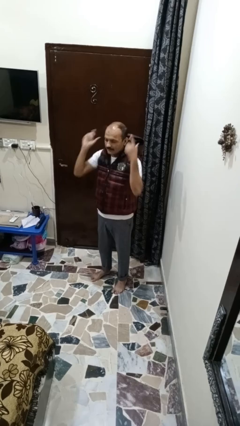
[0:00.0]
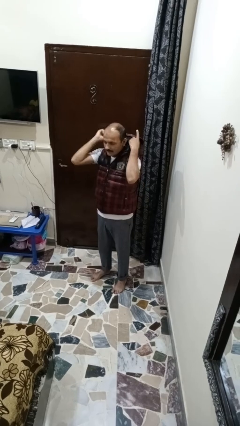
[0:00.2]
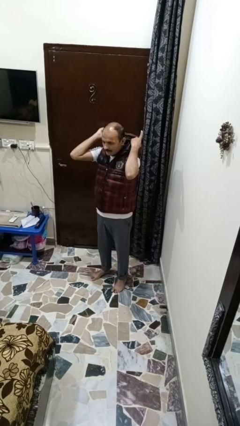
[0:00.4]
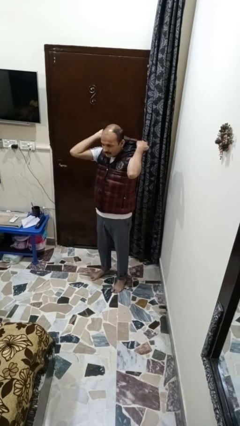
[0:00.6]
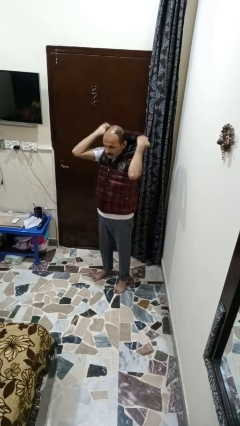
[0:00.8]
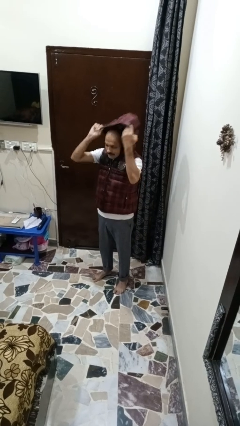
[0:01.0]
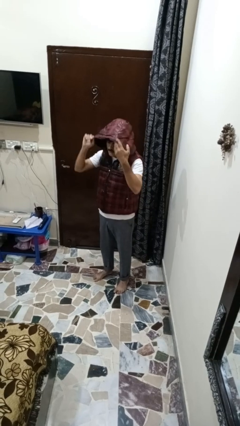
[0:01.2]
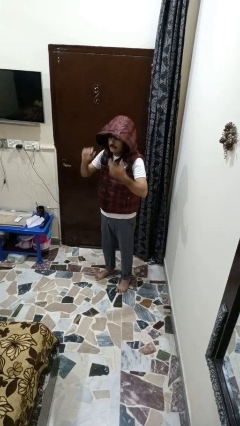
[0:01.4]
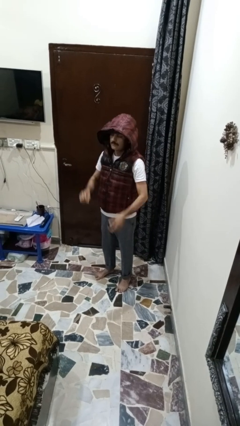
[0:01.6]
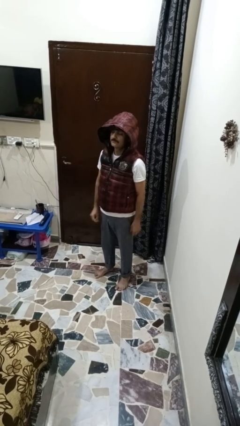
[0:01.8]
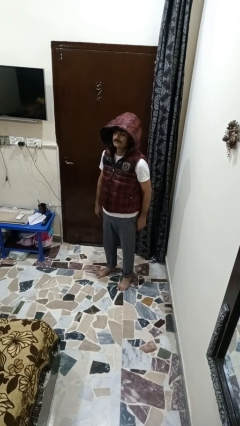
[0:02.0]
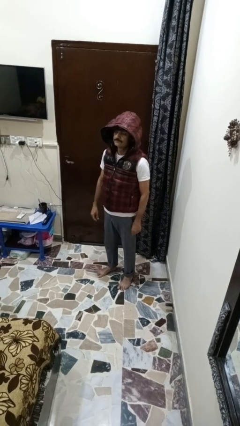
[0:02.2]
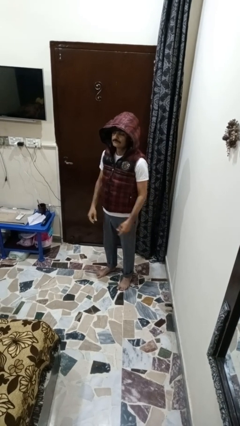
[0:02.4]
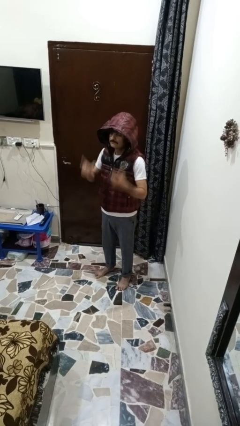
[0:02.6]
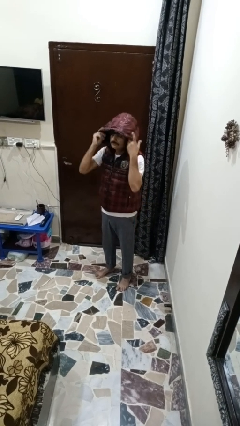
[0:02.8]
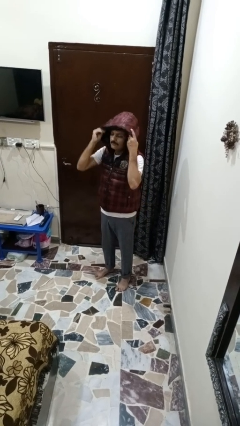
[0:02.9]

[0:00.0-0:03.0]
person puts on hoodie

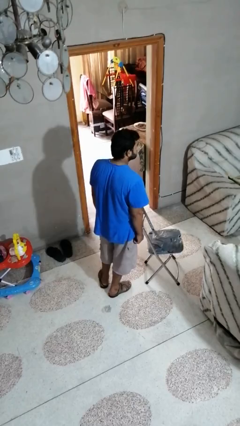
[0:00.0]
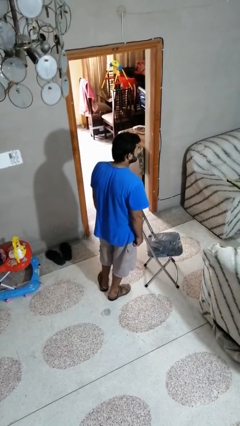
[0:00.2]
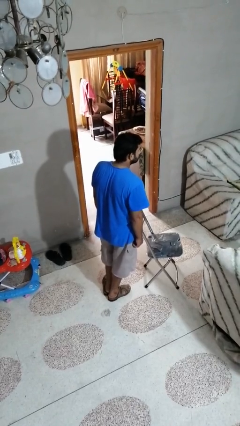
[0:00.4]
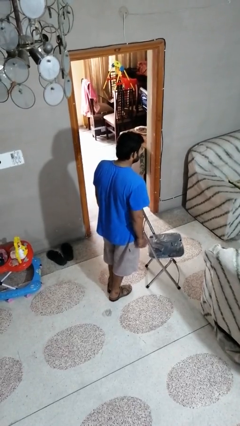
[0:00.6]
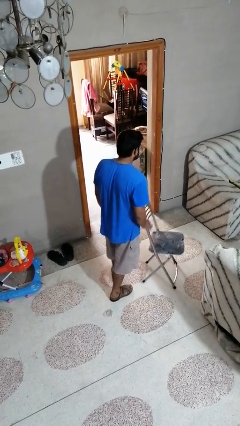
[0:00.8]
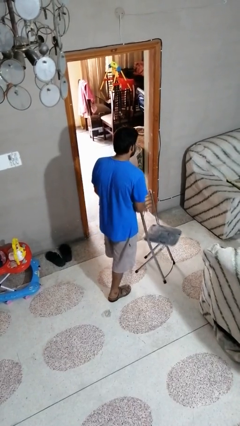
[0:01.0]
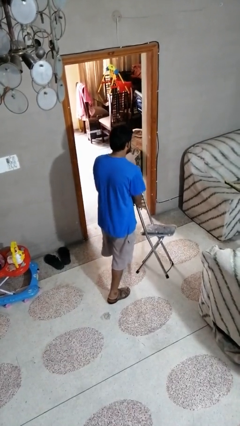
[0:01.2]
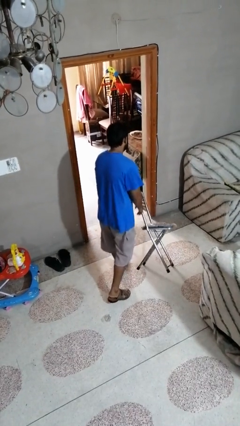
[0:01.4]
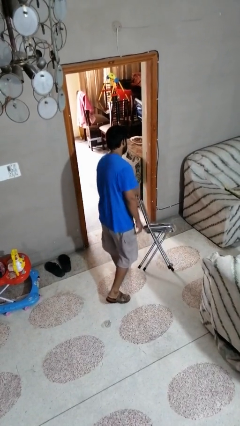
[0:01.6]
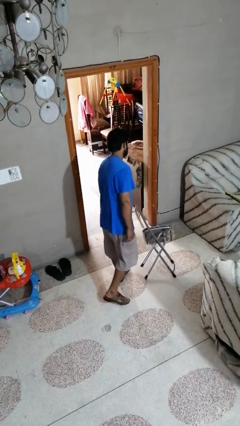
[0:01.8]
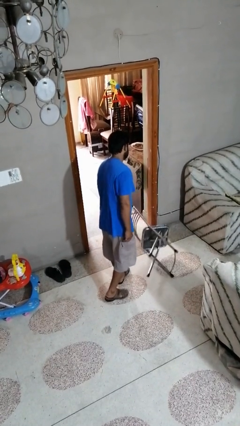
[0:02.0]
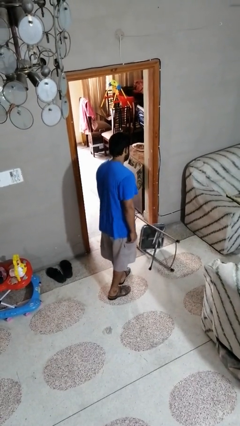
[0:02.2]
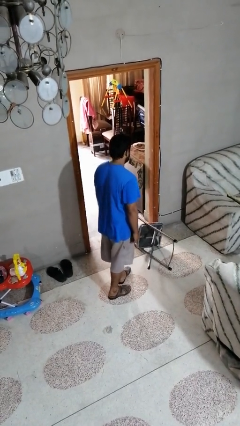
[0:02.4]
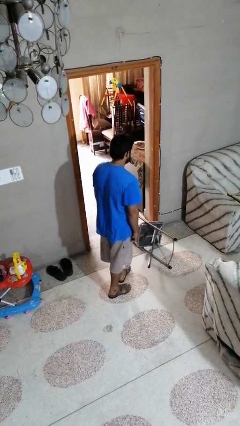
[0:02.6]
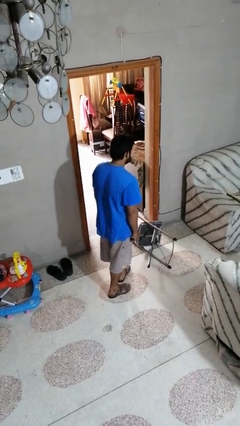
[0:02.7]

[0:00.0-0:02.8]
person knocks over furniture

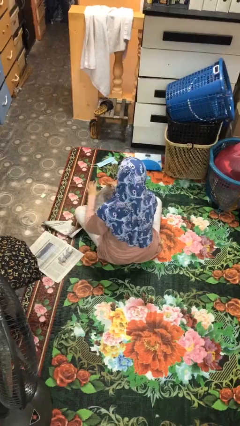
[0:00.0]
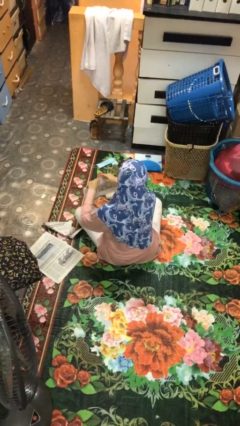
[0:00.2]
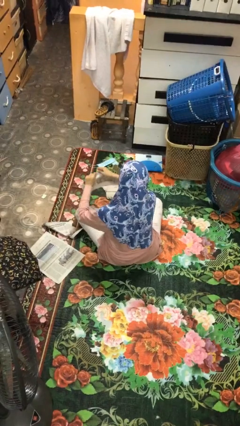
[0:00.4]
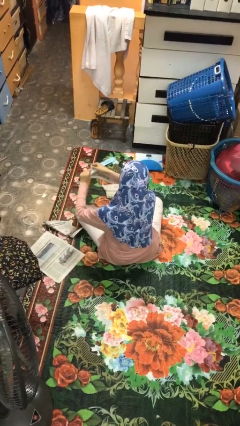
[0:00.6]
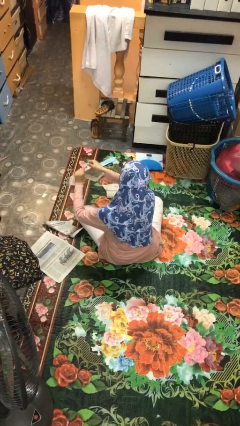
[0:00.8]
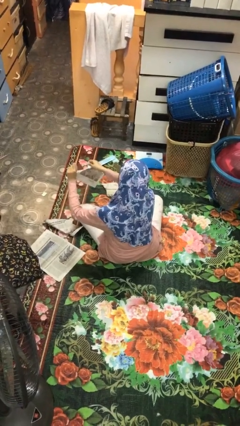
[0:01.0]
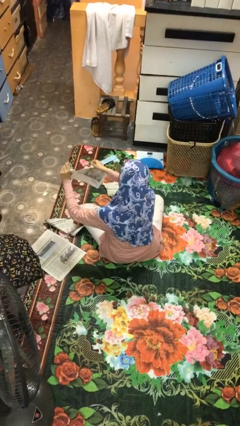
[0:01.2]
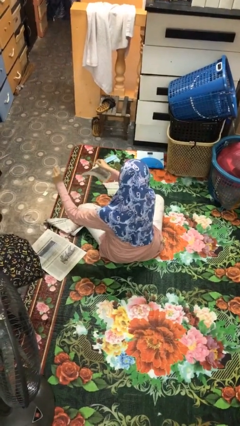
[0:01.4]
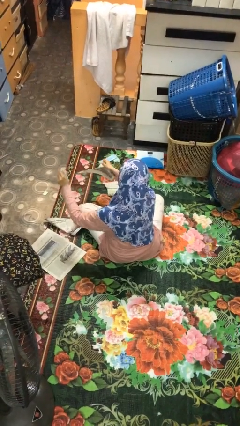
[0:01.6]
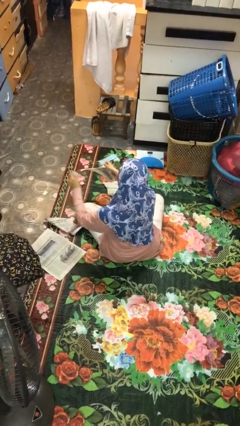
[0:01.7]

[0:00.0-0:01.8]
person tears paper

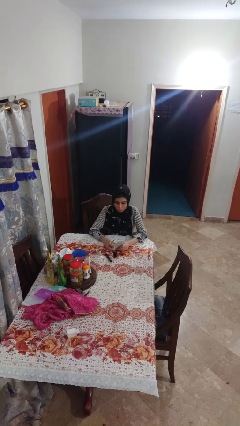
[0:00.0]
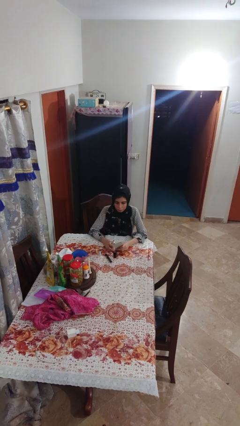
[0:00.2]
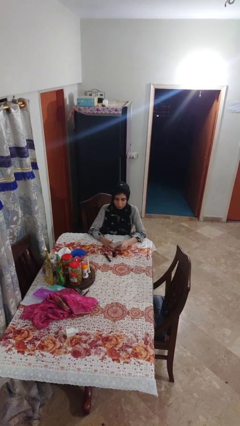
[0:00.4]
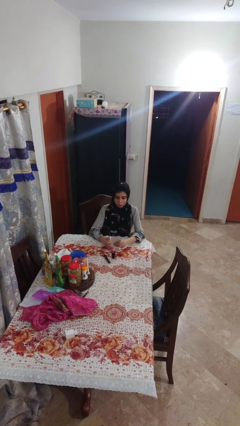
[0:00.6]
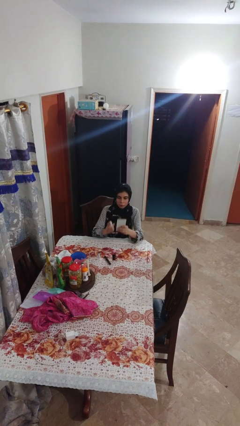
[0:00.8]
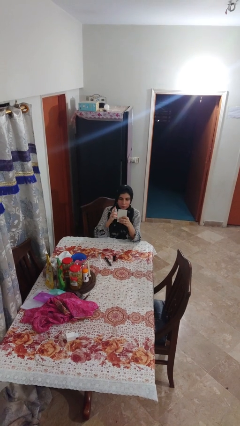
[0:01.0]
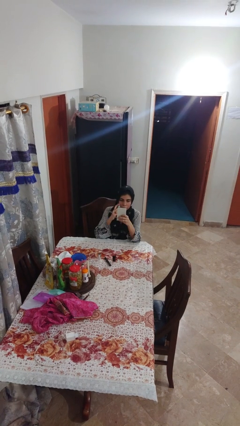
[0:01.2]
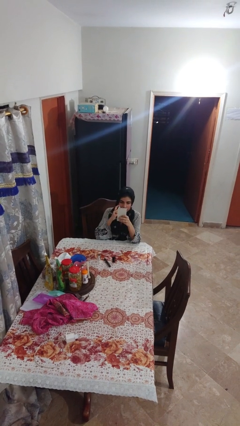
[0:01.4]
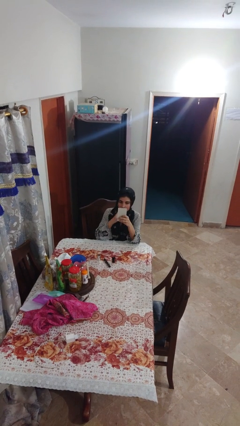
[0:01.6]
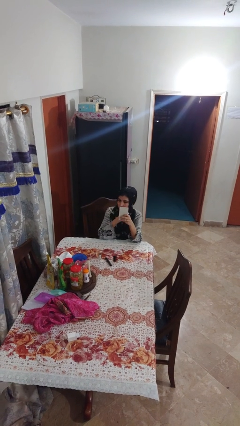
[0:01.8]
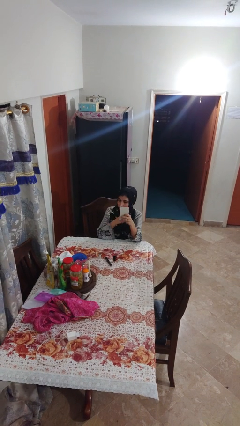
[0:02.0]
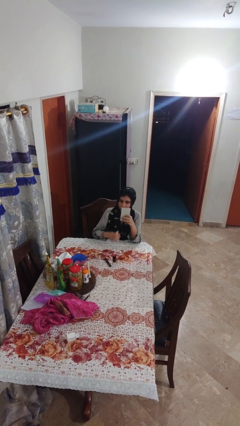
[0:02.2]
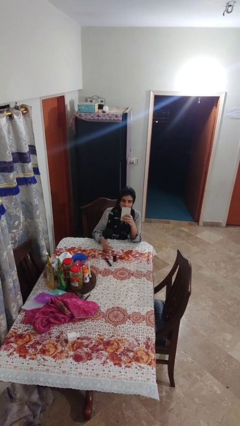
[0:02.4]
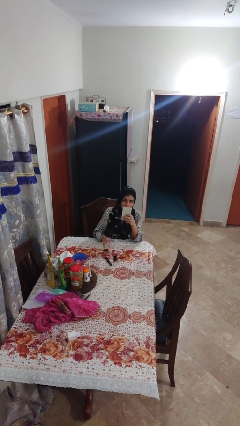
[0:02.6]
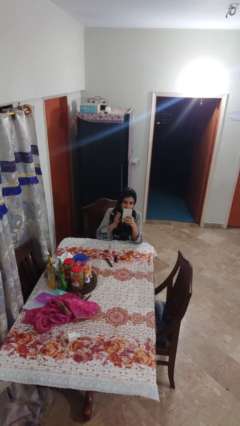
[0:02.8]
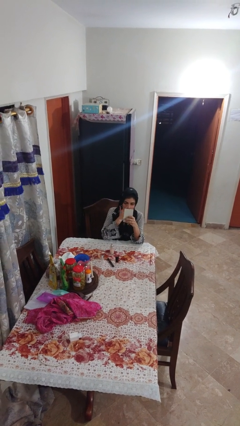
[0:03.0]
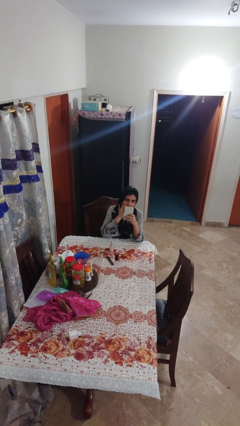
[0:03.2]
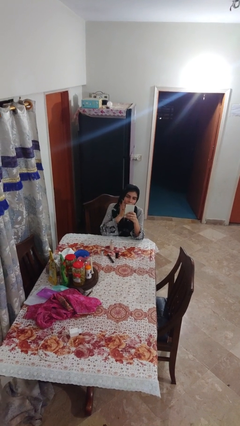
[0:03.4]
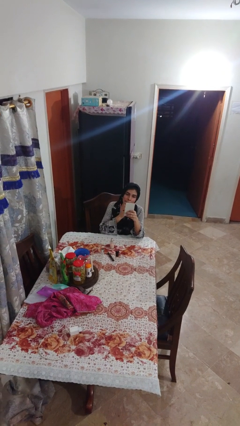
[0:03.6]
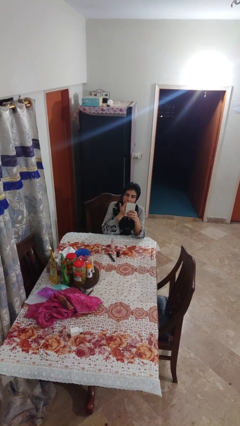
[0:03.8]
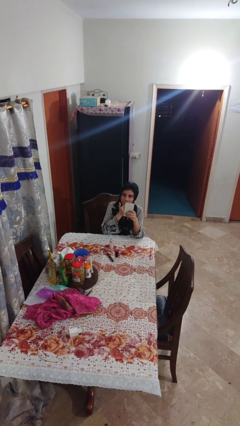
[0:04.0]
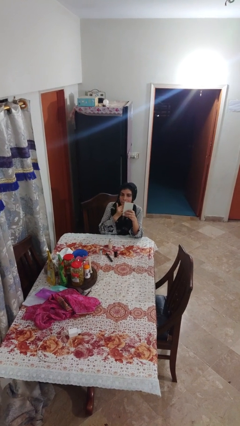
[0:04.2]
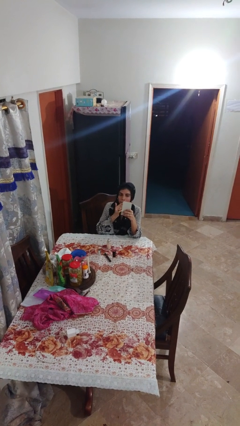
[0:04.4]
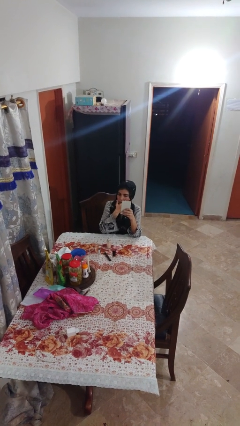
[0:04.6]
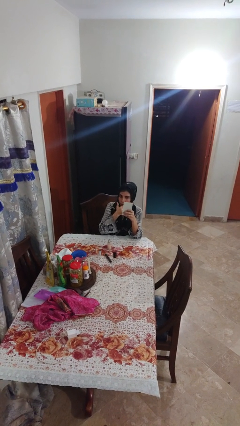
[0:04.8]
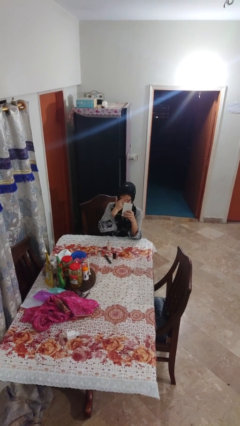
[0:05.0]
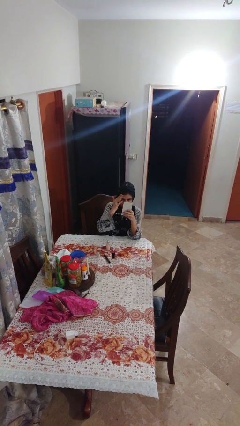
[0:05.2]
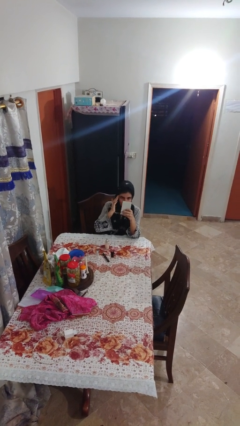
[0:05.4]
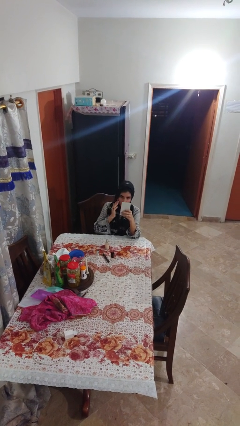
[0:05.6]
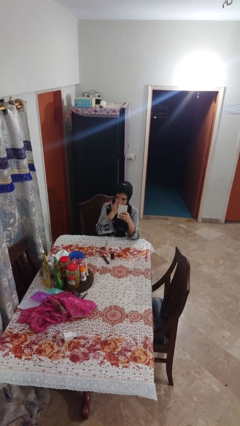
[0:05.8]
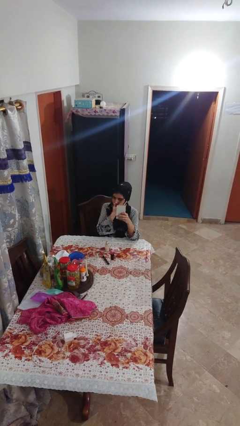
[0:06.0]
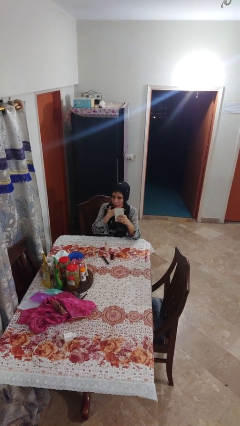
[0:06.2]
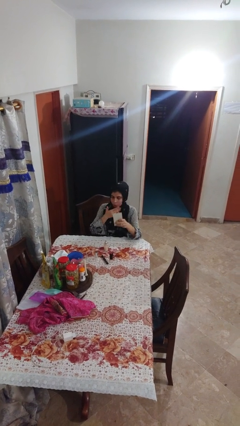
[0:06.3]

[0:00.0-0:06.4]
person applies foundation makeup

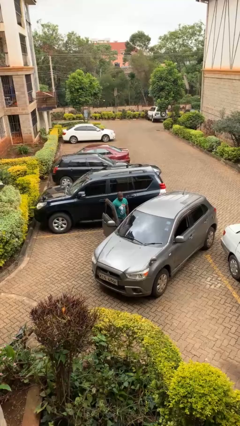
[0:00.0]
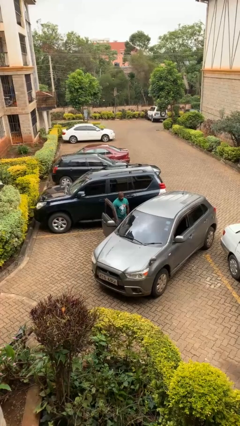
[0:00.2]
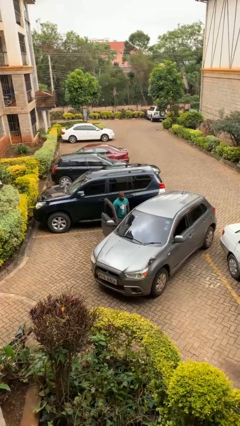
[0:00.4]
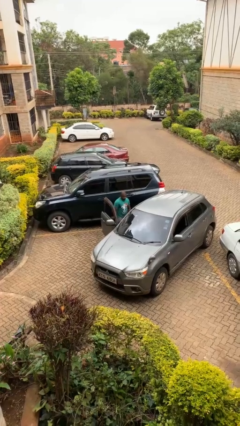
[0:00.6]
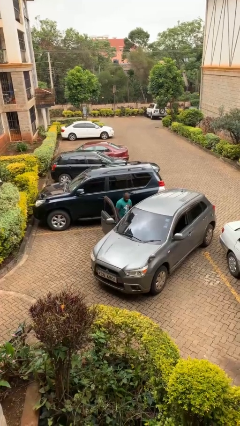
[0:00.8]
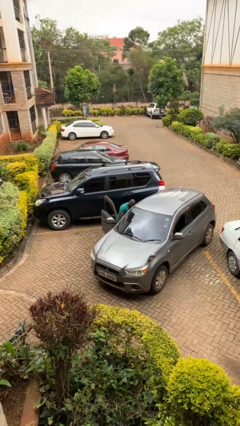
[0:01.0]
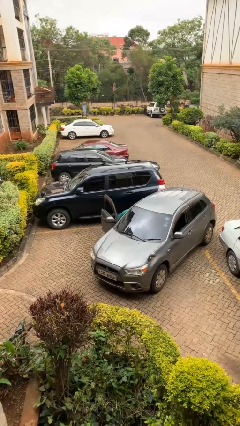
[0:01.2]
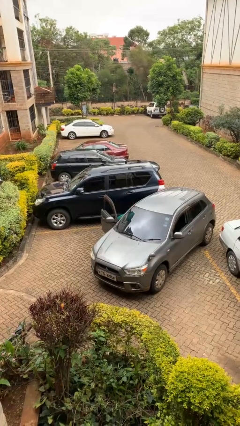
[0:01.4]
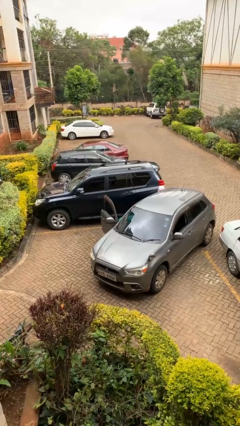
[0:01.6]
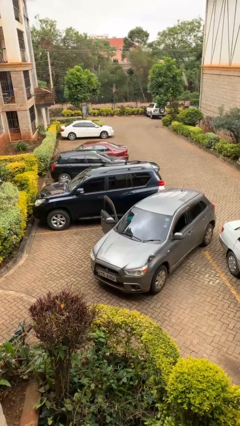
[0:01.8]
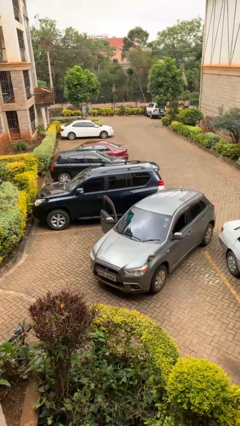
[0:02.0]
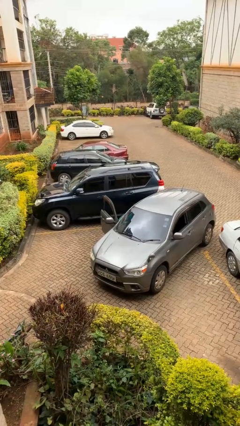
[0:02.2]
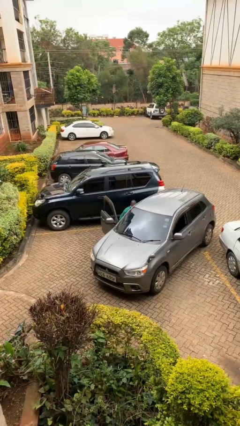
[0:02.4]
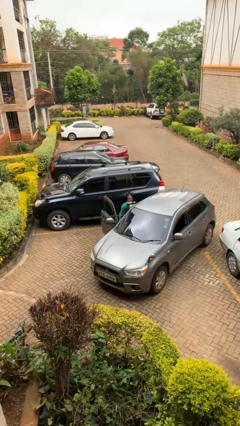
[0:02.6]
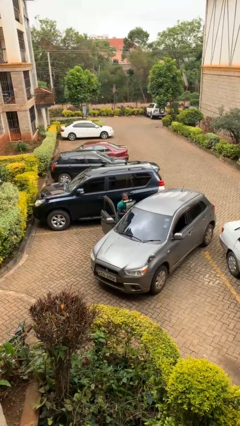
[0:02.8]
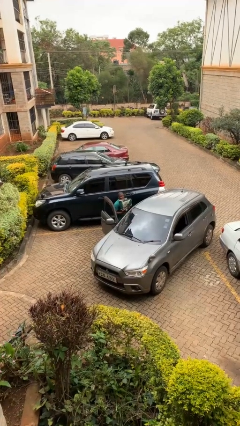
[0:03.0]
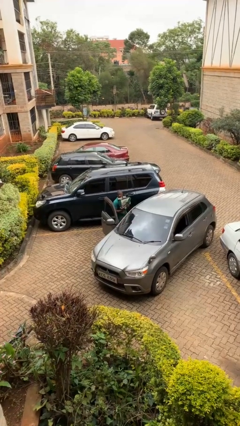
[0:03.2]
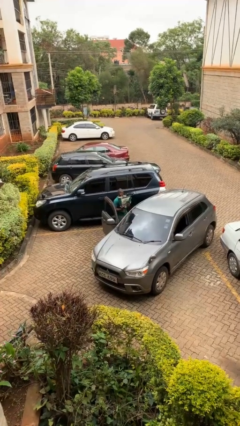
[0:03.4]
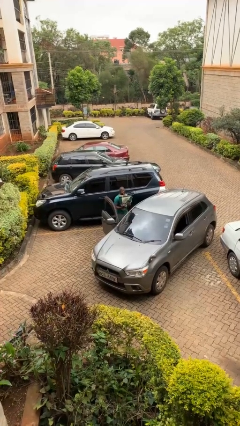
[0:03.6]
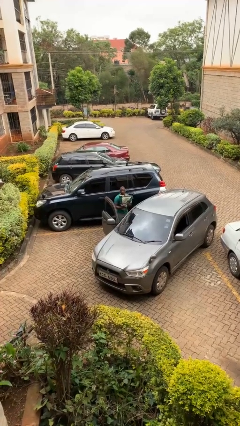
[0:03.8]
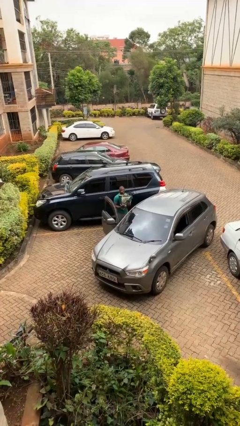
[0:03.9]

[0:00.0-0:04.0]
person unloads car
